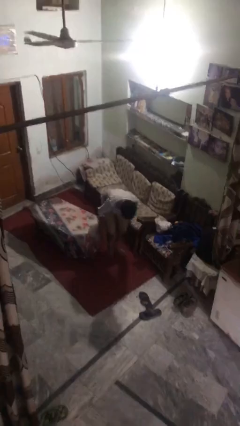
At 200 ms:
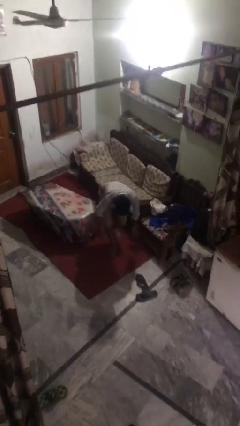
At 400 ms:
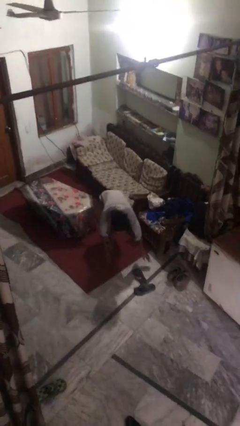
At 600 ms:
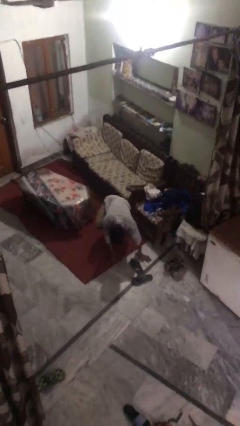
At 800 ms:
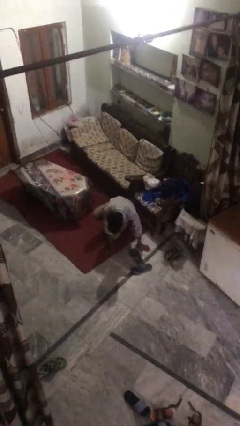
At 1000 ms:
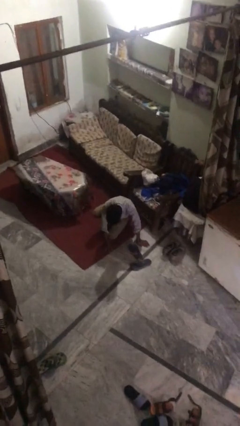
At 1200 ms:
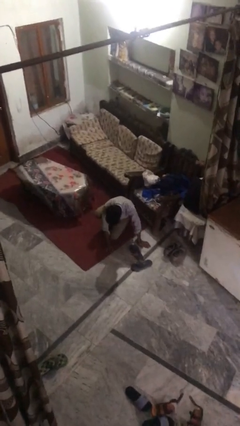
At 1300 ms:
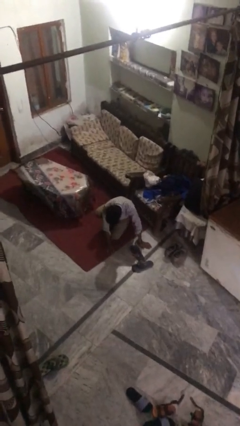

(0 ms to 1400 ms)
person lies down on floor

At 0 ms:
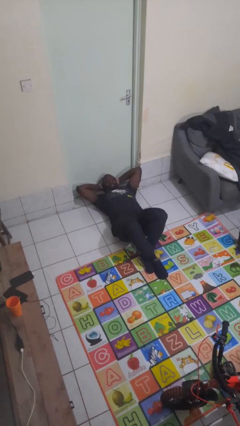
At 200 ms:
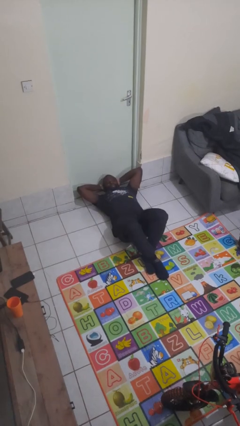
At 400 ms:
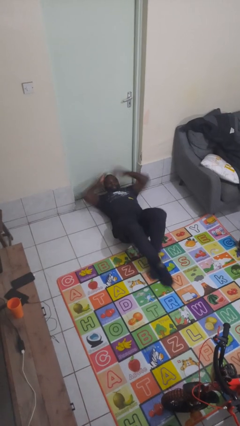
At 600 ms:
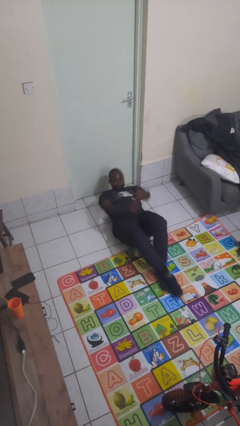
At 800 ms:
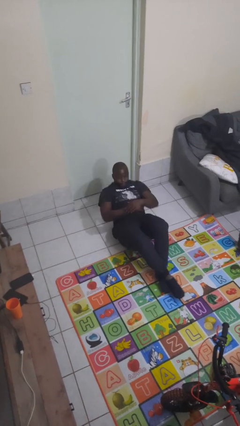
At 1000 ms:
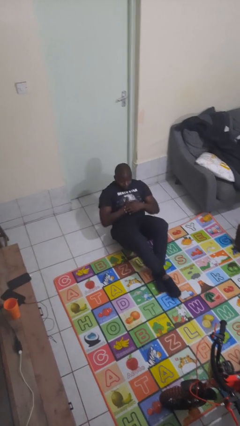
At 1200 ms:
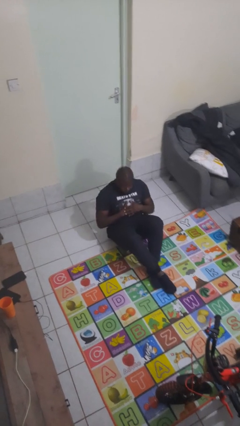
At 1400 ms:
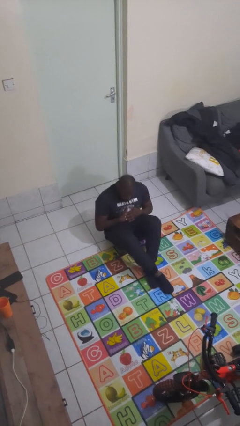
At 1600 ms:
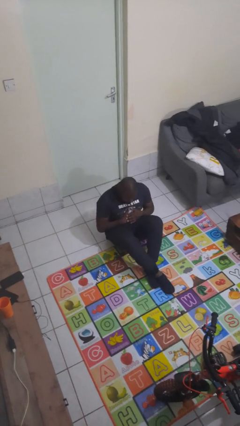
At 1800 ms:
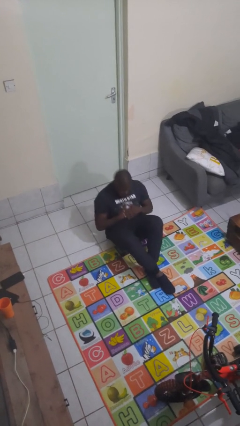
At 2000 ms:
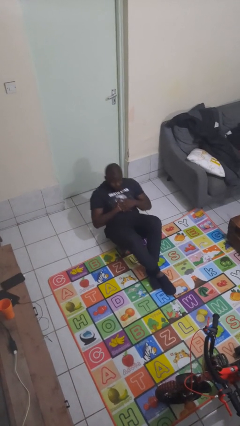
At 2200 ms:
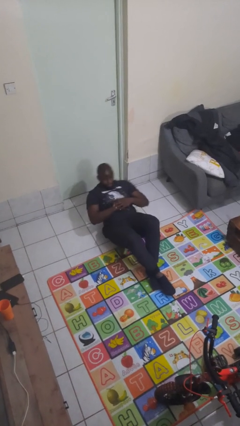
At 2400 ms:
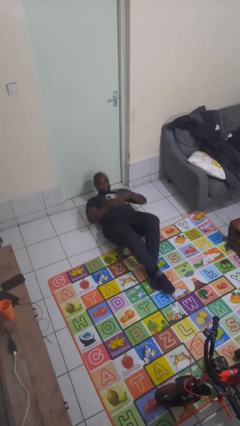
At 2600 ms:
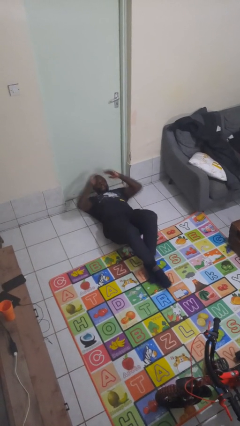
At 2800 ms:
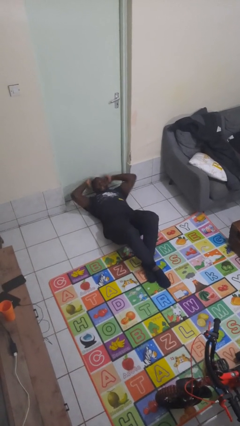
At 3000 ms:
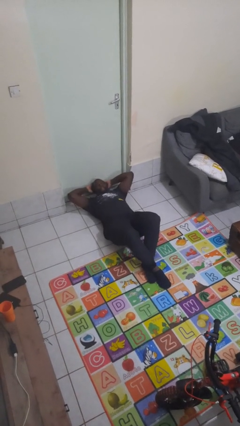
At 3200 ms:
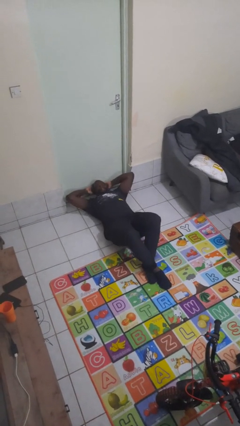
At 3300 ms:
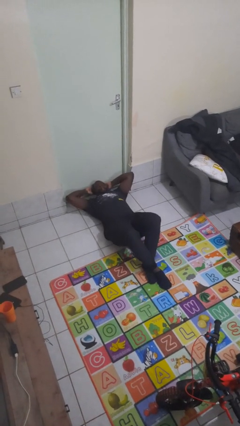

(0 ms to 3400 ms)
person exercises with situp

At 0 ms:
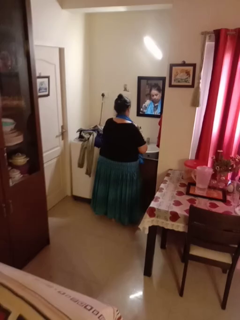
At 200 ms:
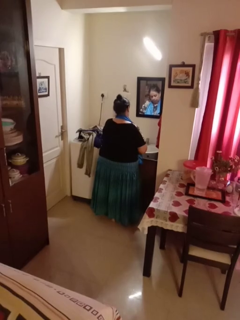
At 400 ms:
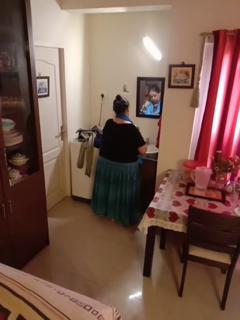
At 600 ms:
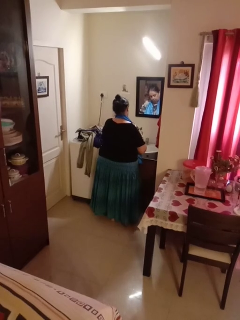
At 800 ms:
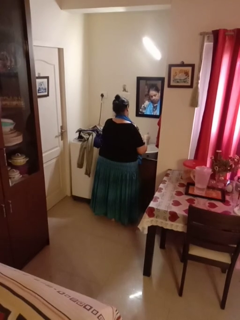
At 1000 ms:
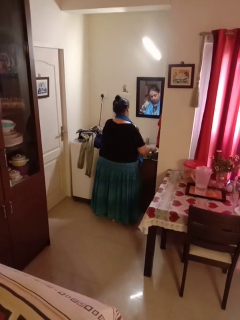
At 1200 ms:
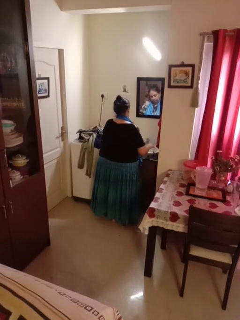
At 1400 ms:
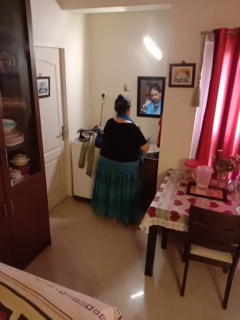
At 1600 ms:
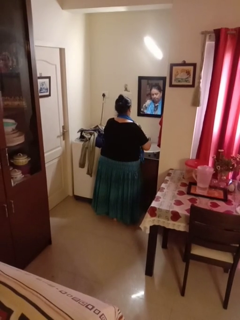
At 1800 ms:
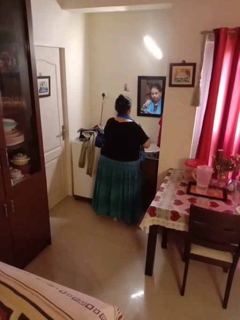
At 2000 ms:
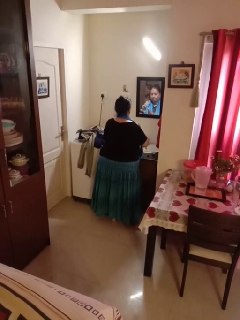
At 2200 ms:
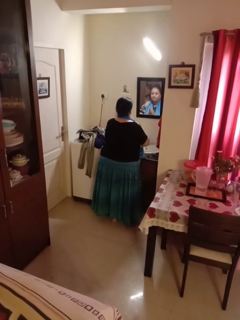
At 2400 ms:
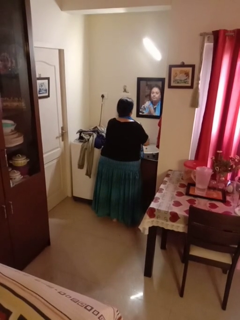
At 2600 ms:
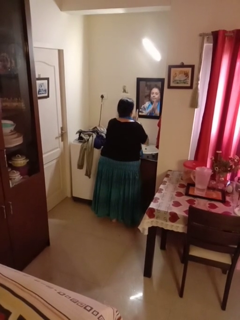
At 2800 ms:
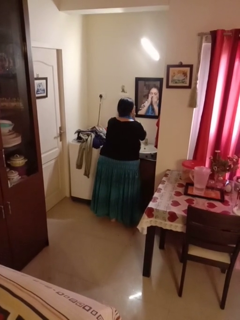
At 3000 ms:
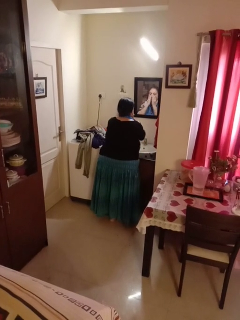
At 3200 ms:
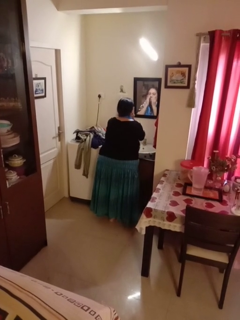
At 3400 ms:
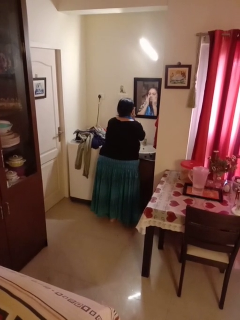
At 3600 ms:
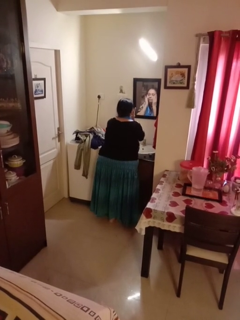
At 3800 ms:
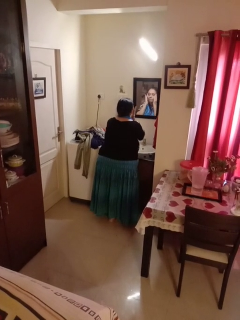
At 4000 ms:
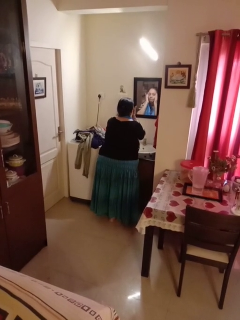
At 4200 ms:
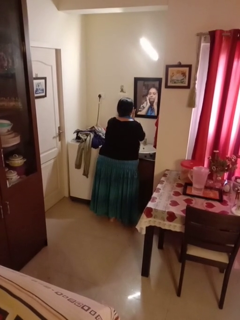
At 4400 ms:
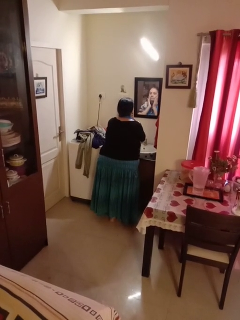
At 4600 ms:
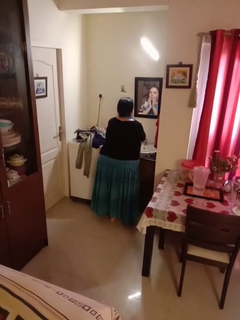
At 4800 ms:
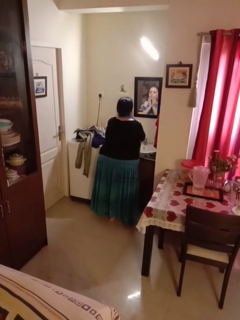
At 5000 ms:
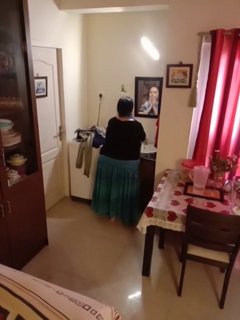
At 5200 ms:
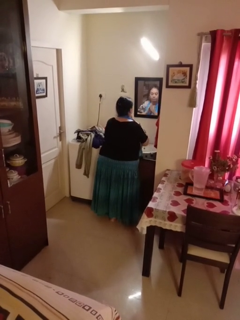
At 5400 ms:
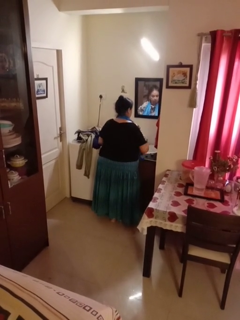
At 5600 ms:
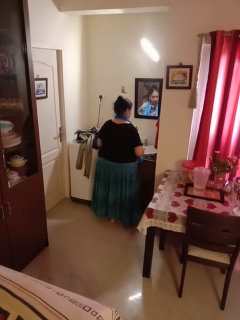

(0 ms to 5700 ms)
person applies foundation makeup

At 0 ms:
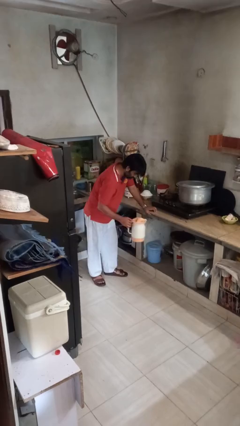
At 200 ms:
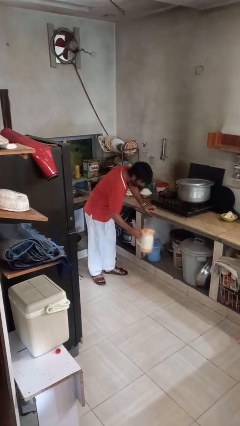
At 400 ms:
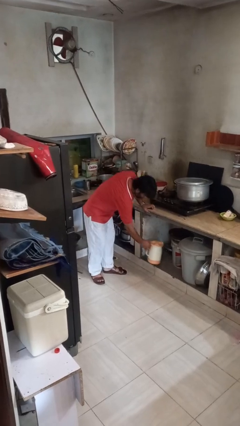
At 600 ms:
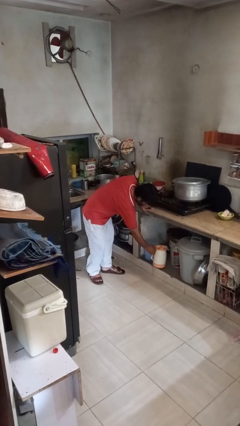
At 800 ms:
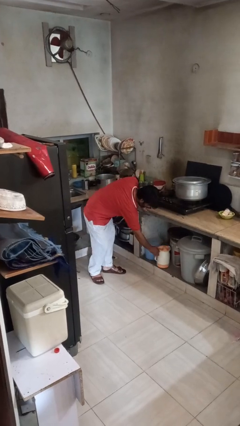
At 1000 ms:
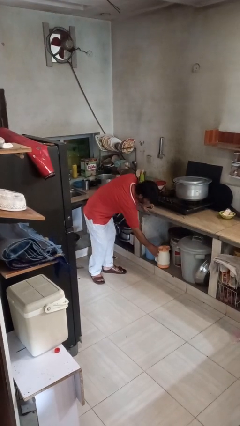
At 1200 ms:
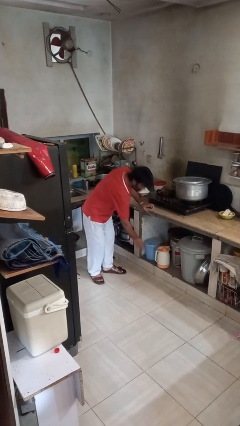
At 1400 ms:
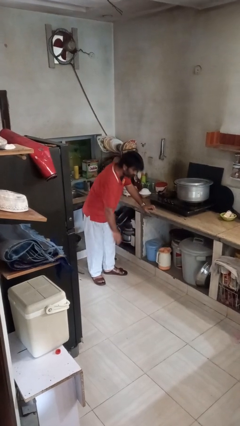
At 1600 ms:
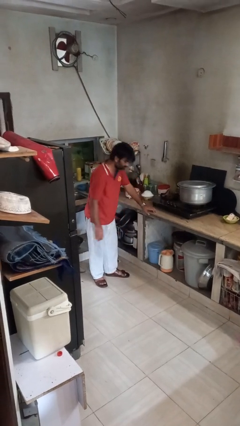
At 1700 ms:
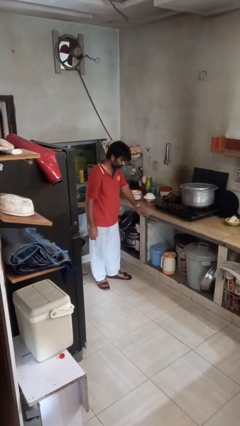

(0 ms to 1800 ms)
person puts down object into cabinet

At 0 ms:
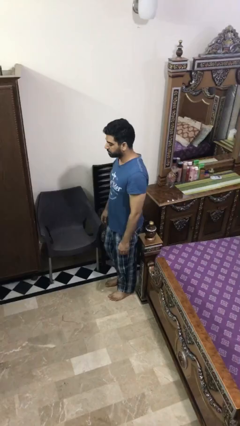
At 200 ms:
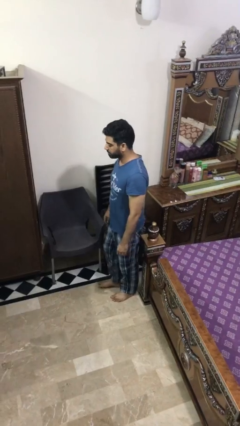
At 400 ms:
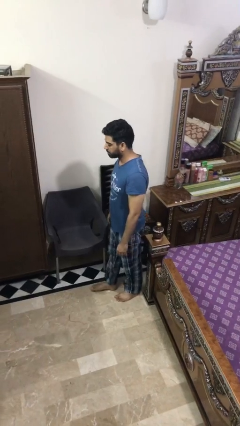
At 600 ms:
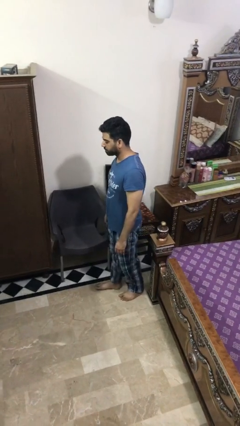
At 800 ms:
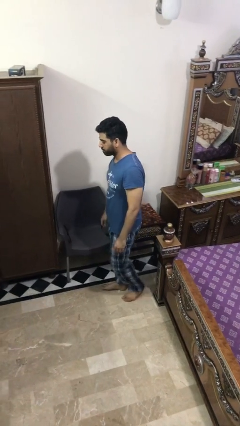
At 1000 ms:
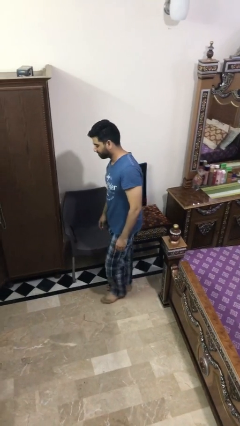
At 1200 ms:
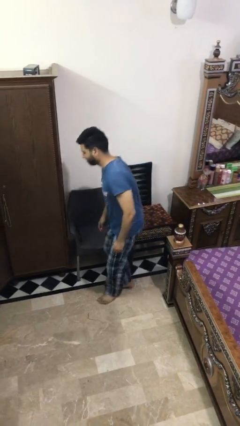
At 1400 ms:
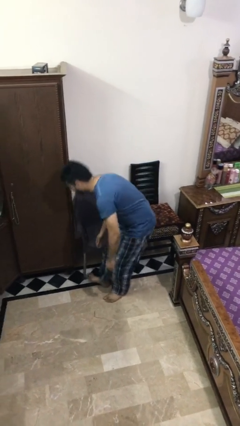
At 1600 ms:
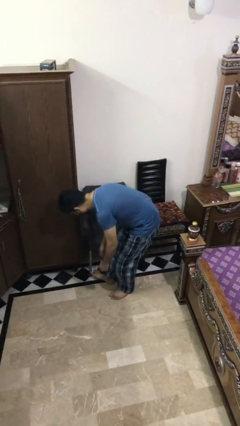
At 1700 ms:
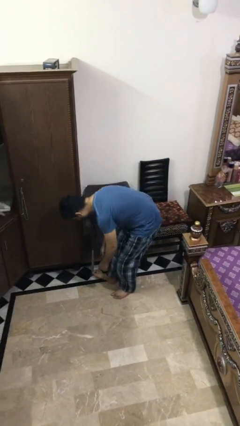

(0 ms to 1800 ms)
person stubs toe

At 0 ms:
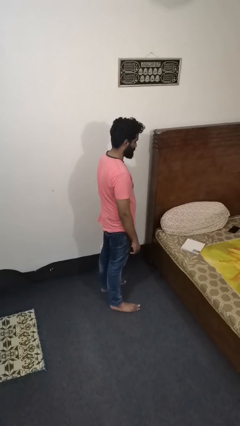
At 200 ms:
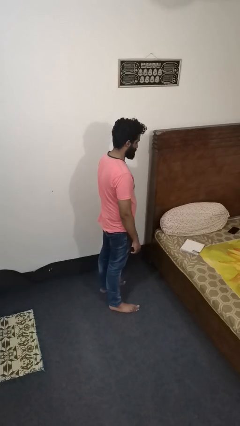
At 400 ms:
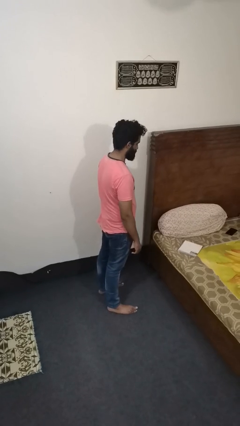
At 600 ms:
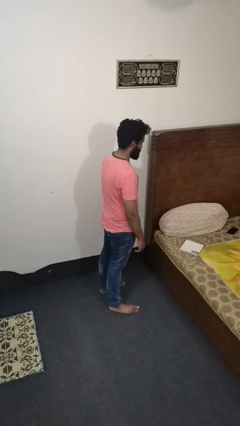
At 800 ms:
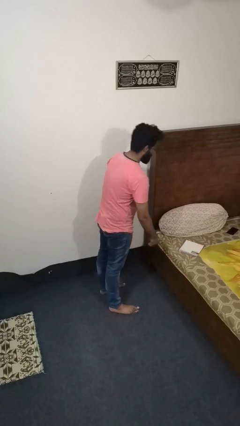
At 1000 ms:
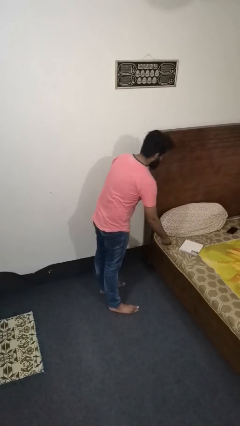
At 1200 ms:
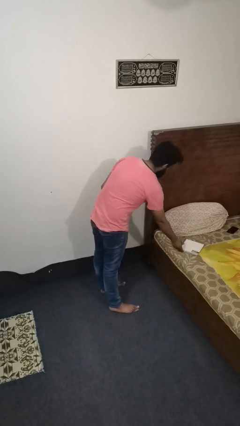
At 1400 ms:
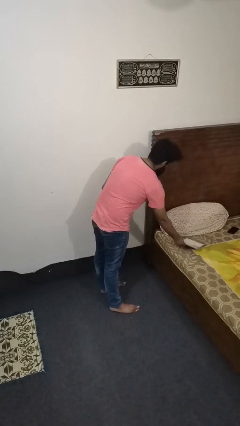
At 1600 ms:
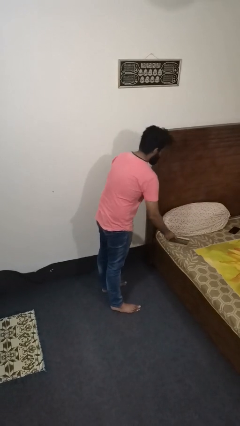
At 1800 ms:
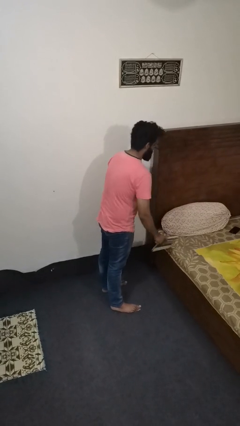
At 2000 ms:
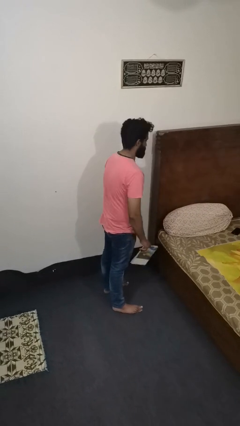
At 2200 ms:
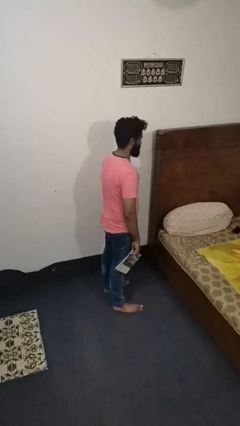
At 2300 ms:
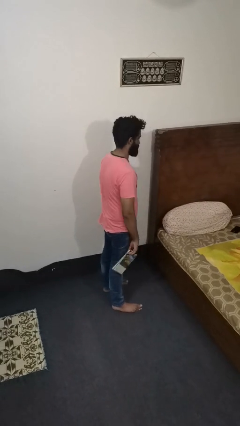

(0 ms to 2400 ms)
person picks up object from bed

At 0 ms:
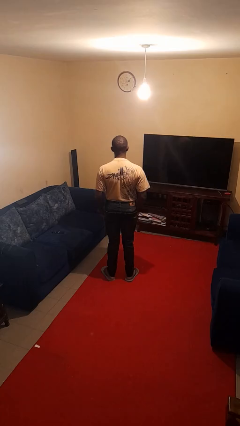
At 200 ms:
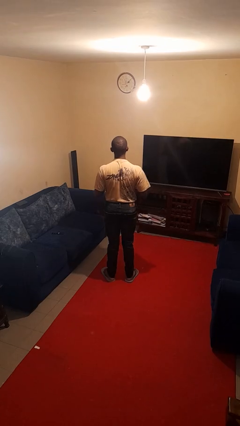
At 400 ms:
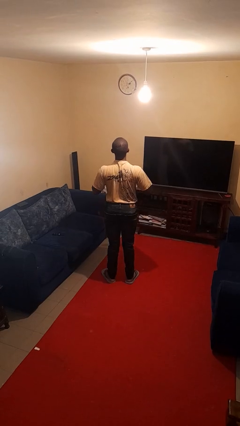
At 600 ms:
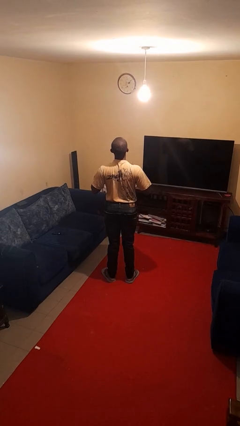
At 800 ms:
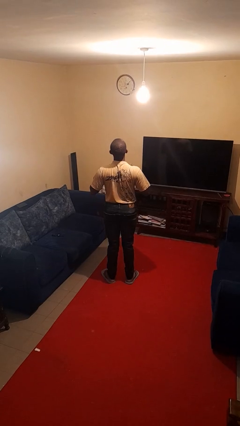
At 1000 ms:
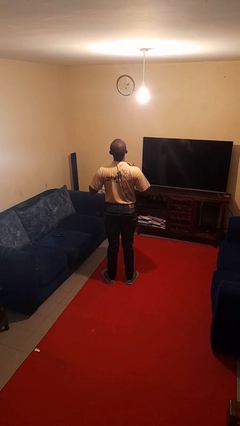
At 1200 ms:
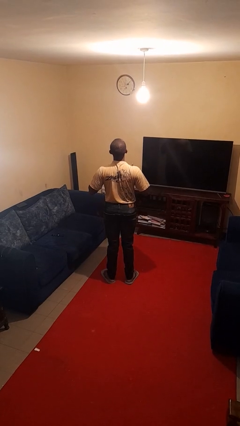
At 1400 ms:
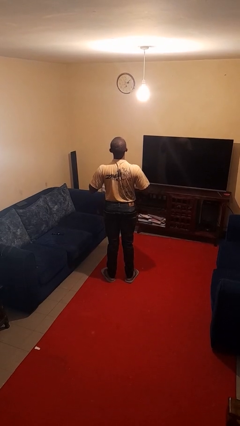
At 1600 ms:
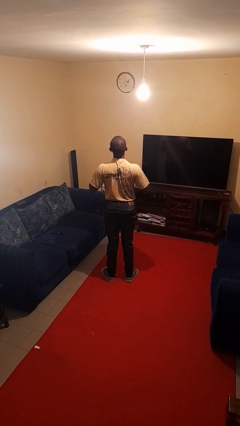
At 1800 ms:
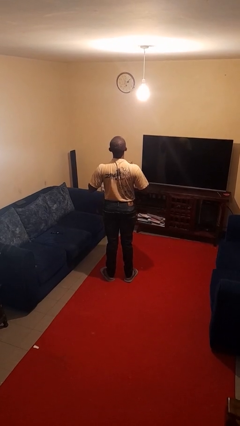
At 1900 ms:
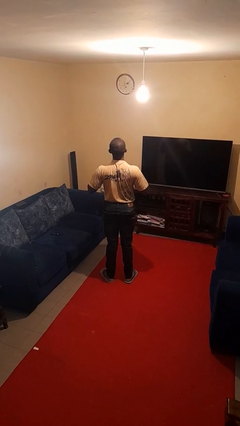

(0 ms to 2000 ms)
person drums on chest

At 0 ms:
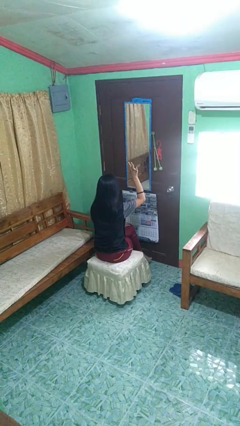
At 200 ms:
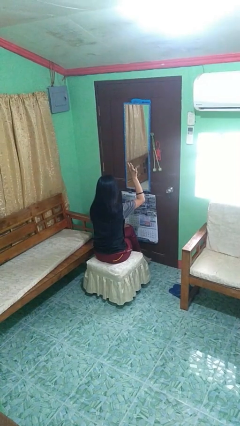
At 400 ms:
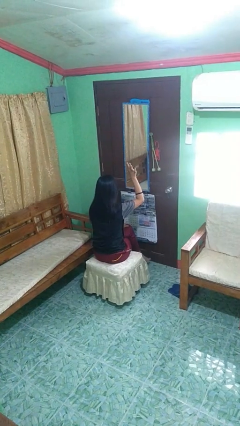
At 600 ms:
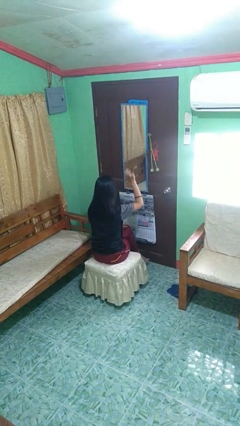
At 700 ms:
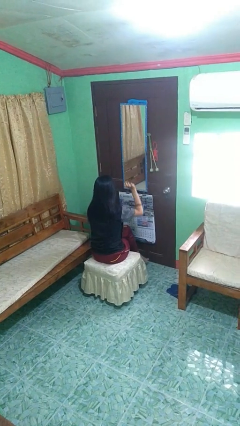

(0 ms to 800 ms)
person gestures lower hand
